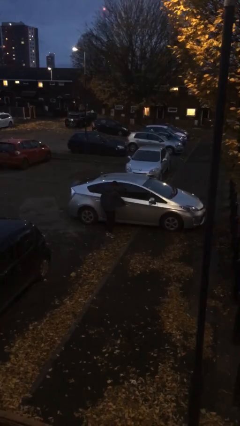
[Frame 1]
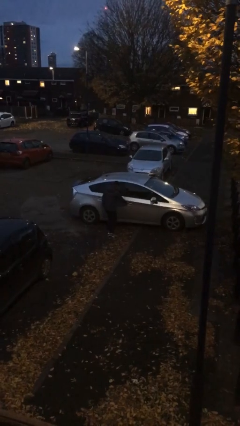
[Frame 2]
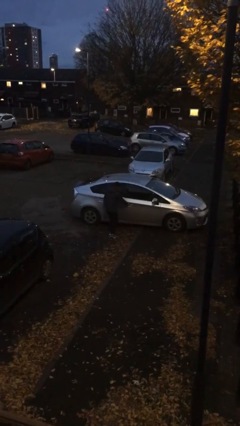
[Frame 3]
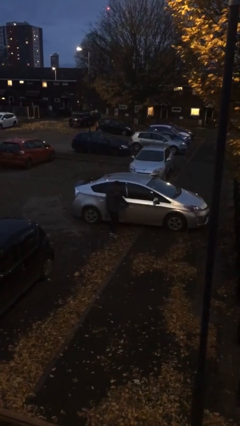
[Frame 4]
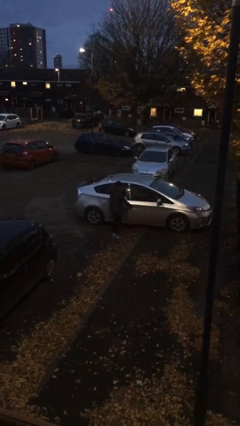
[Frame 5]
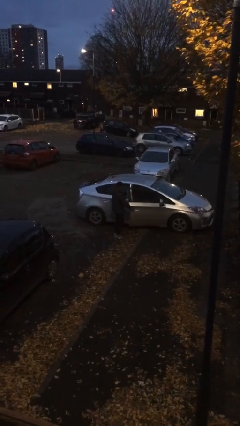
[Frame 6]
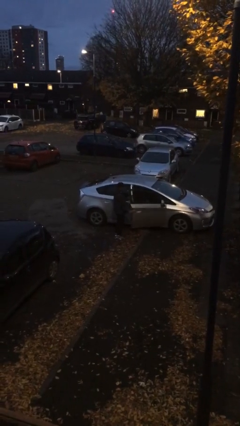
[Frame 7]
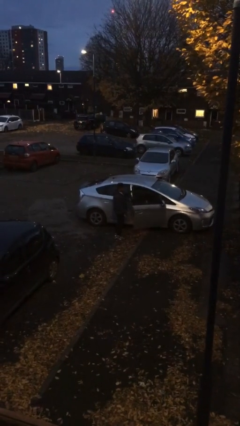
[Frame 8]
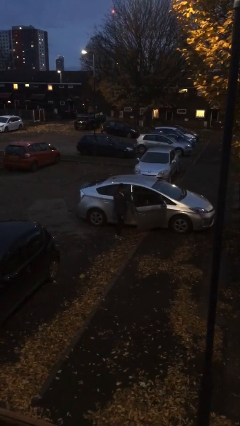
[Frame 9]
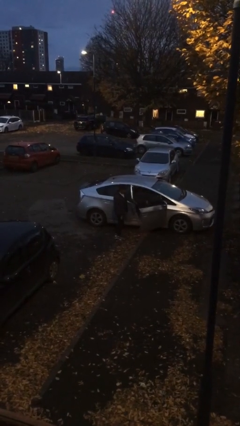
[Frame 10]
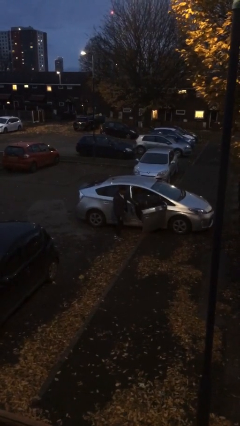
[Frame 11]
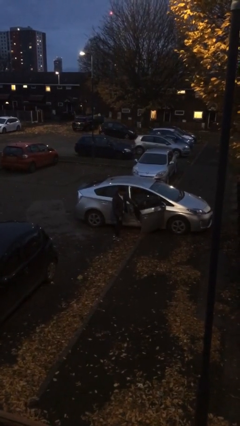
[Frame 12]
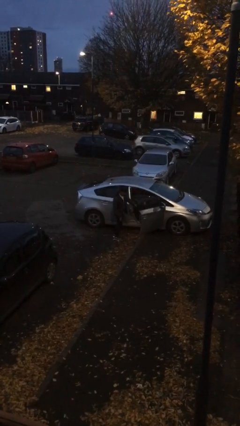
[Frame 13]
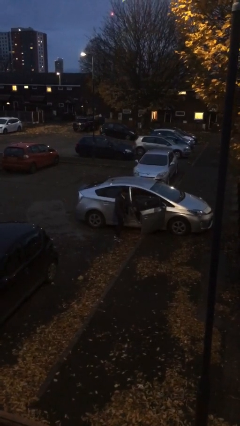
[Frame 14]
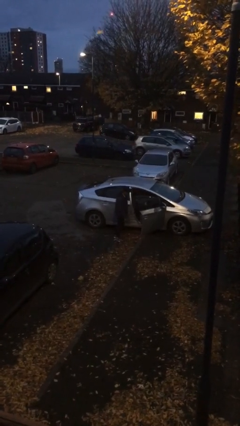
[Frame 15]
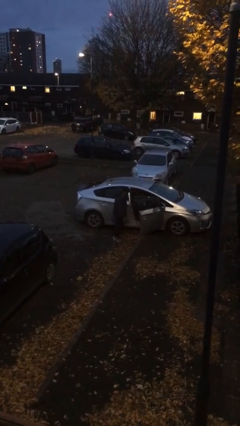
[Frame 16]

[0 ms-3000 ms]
person opens car door

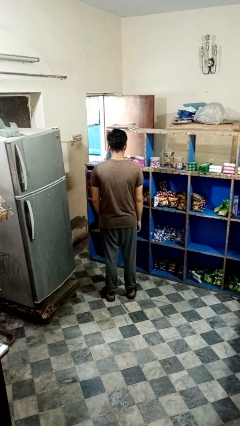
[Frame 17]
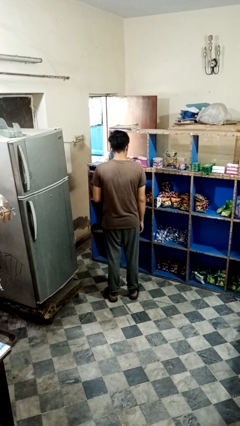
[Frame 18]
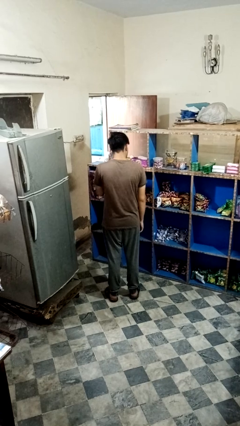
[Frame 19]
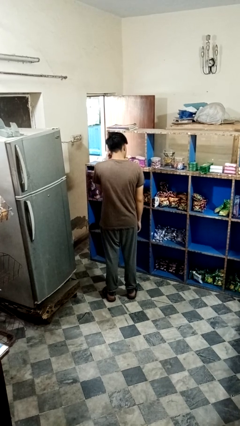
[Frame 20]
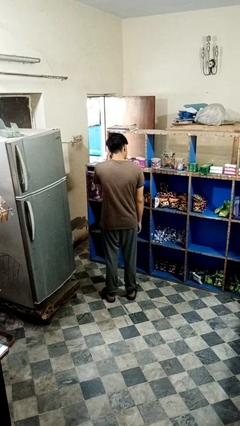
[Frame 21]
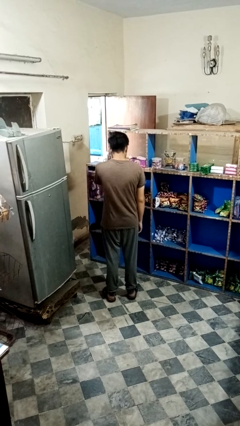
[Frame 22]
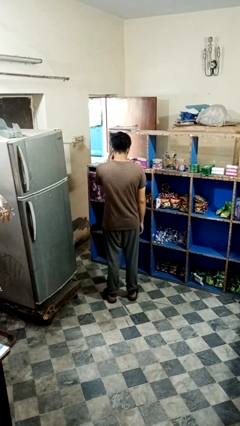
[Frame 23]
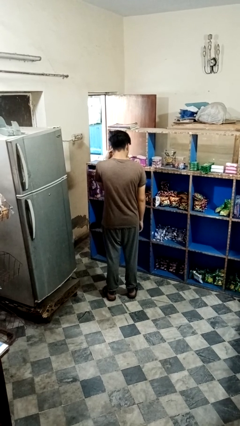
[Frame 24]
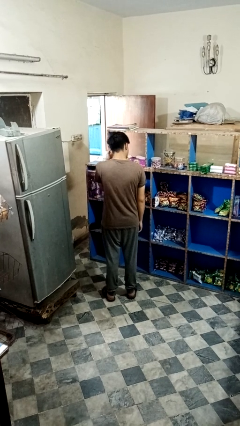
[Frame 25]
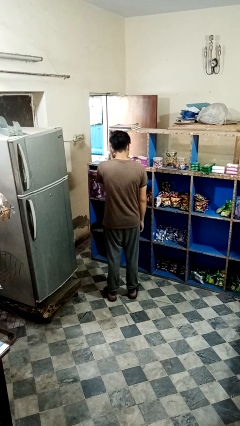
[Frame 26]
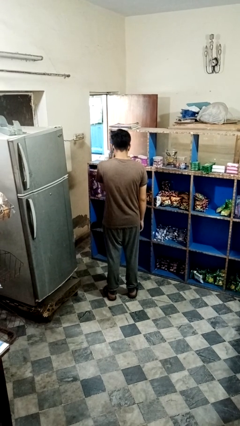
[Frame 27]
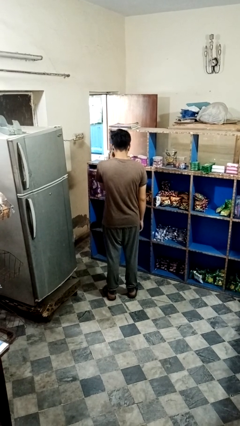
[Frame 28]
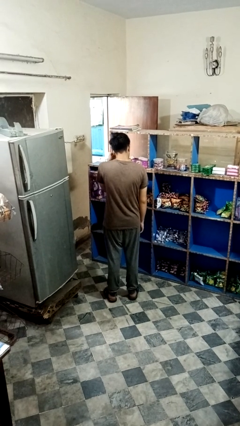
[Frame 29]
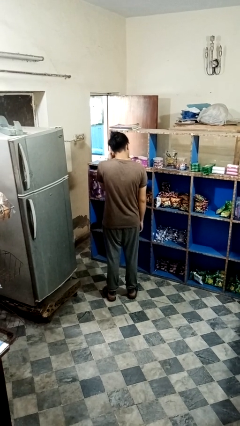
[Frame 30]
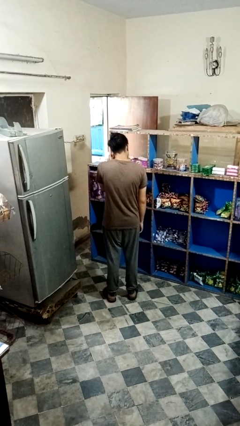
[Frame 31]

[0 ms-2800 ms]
person rubs eyes

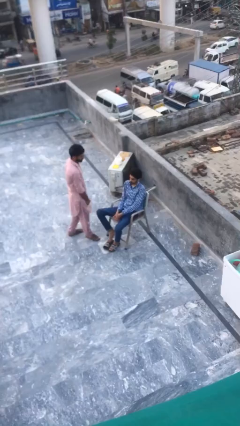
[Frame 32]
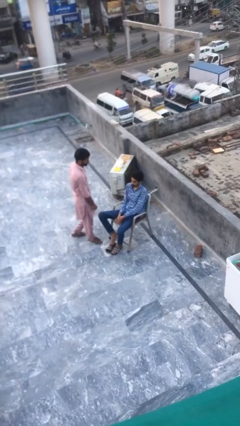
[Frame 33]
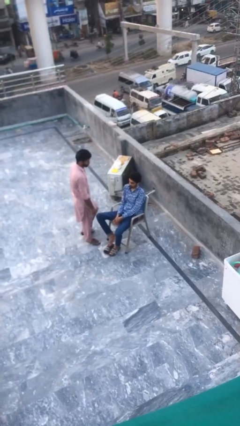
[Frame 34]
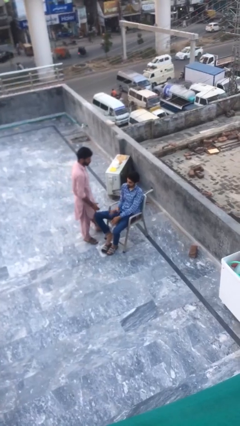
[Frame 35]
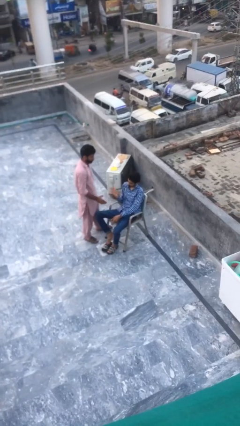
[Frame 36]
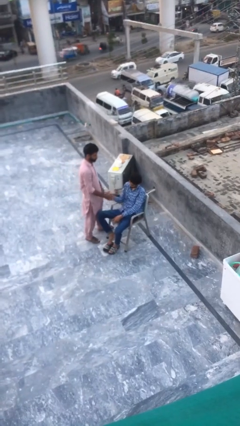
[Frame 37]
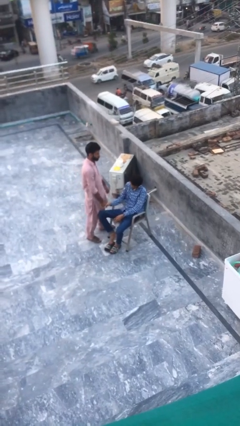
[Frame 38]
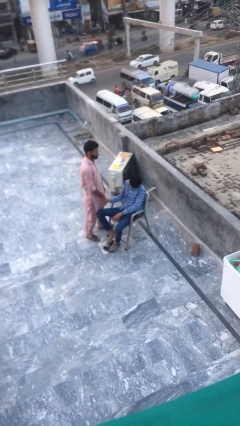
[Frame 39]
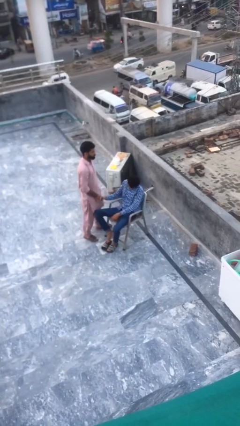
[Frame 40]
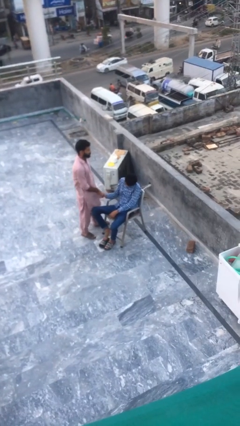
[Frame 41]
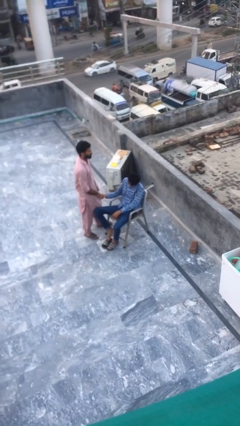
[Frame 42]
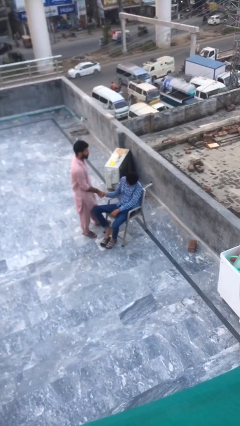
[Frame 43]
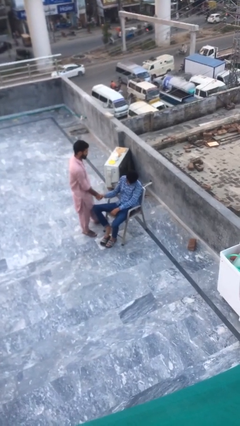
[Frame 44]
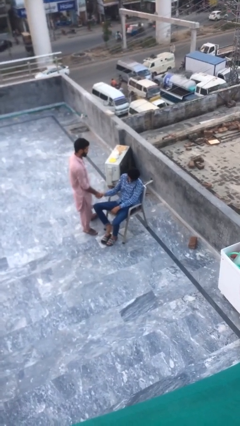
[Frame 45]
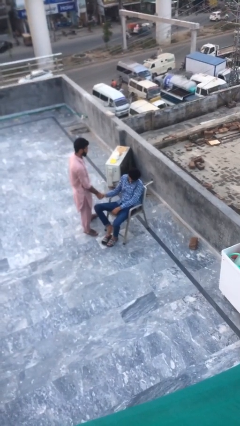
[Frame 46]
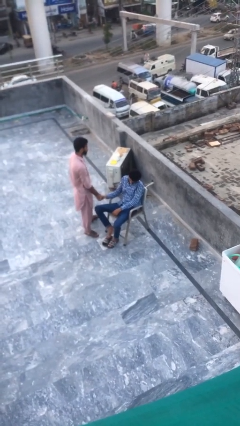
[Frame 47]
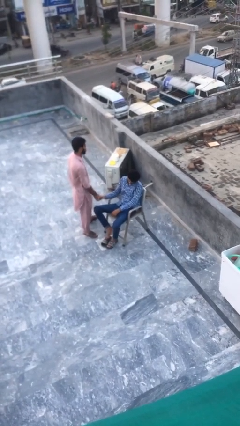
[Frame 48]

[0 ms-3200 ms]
person shakes hand

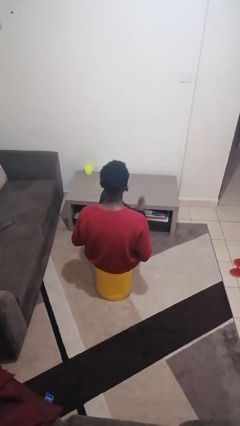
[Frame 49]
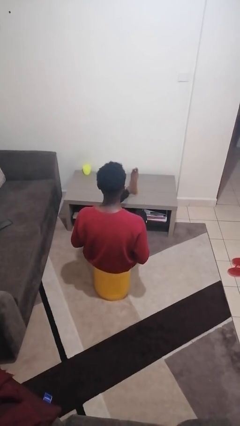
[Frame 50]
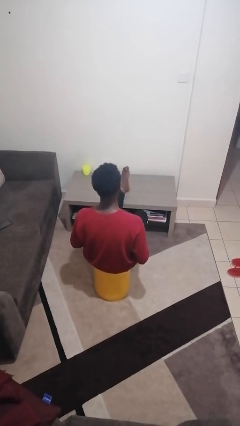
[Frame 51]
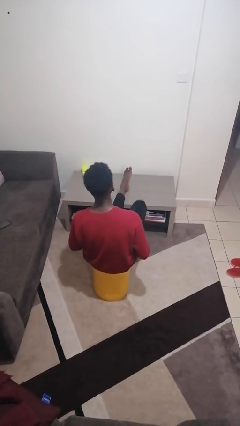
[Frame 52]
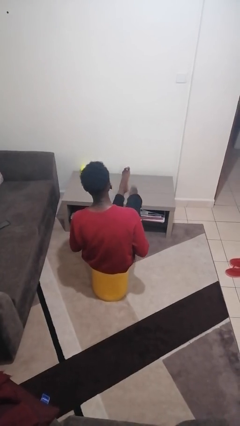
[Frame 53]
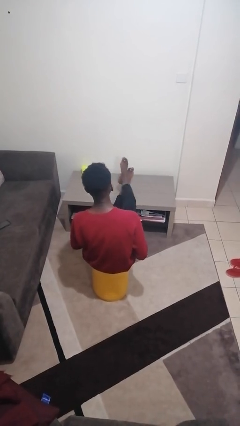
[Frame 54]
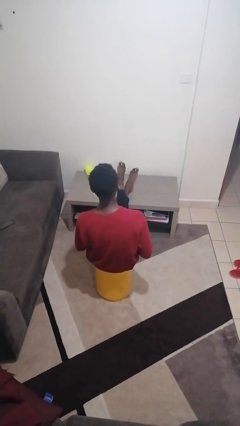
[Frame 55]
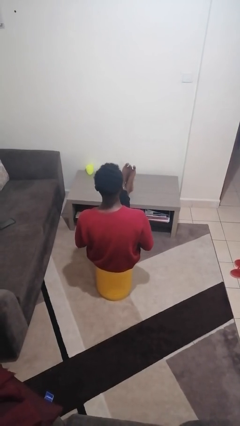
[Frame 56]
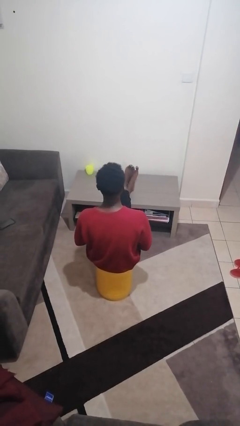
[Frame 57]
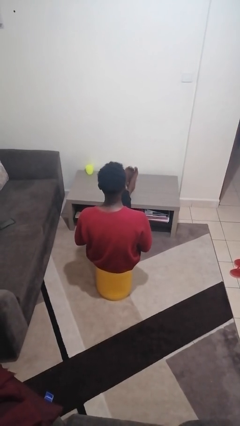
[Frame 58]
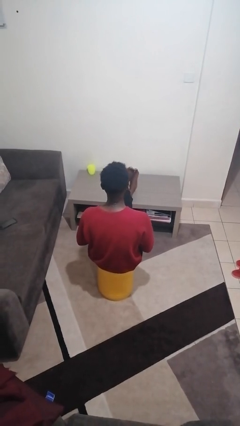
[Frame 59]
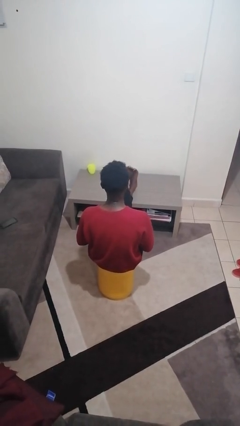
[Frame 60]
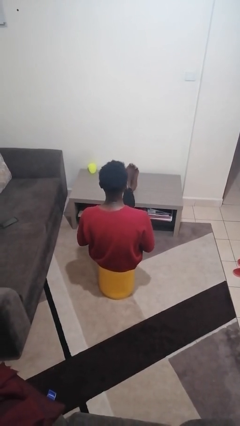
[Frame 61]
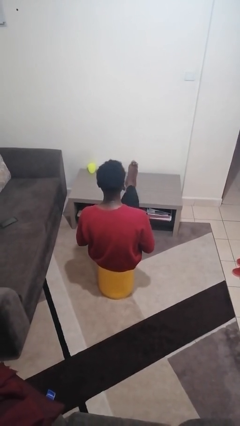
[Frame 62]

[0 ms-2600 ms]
person puts feet up

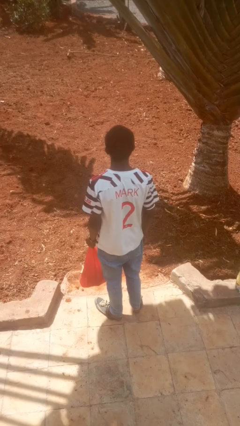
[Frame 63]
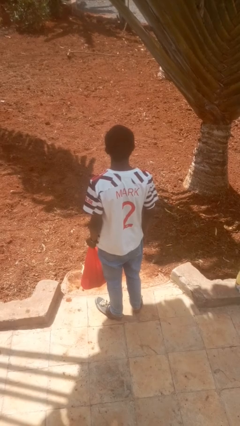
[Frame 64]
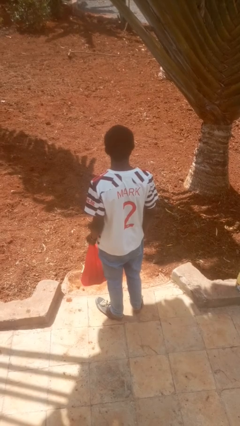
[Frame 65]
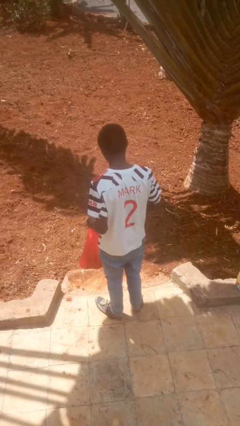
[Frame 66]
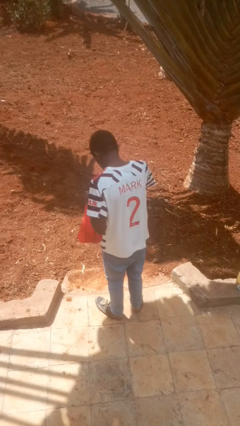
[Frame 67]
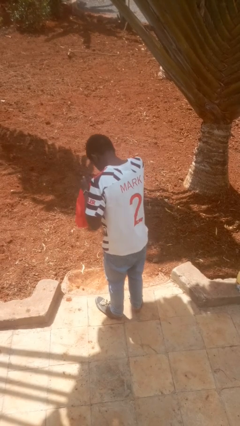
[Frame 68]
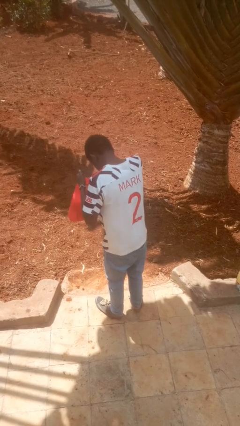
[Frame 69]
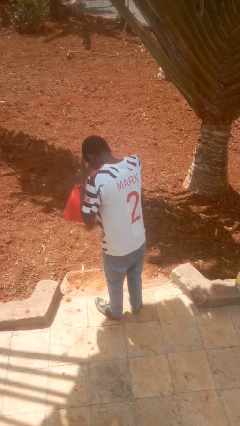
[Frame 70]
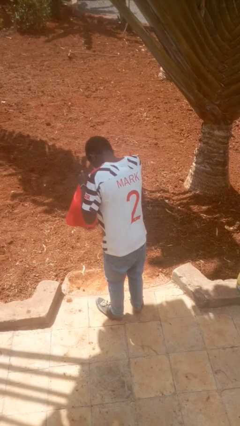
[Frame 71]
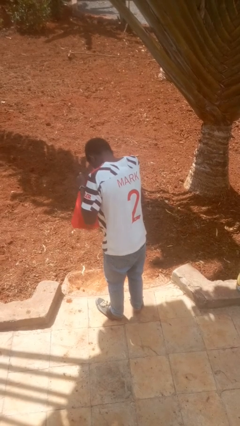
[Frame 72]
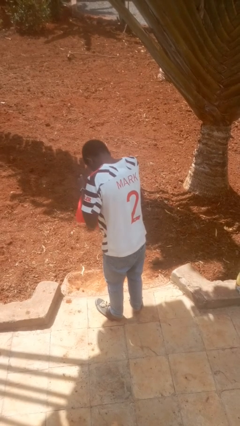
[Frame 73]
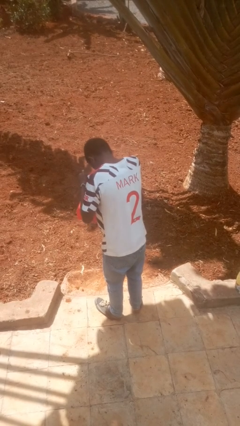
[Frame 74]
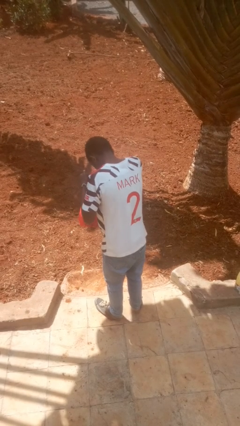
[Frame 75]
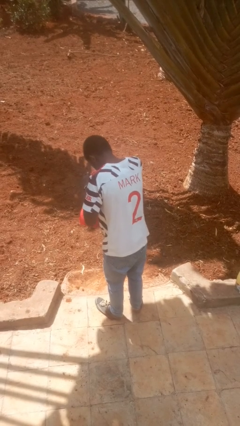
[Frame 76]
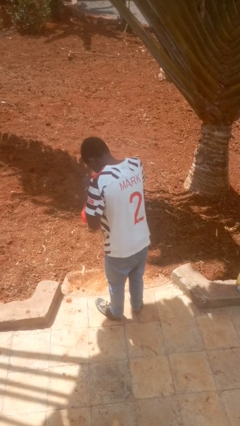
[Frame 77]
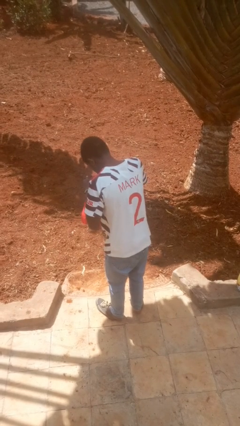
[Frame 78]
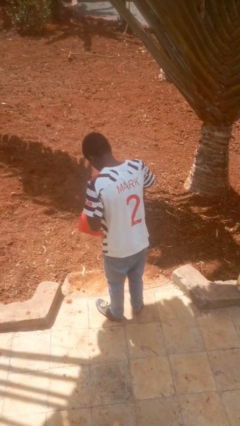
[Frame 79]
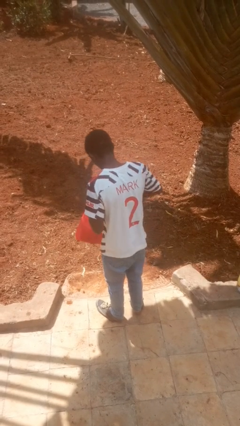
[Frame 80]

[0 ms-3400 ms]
person searches in bag

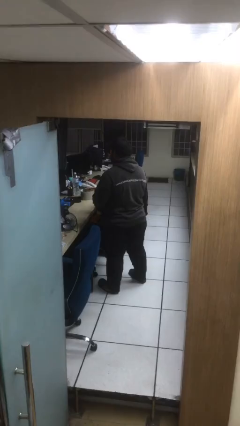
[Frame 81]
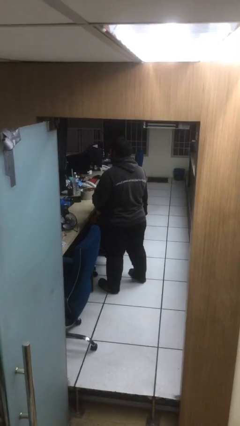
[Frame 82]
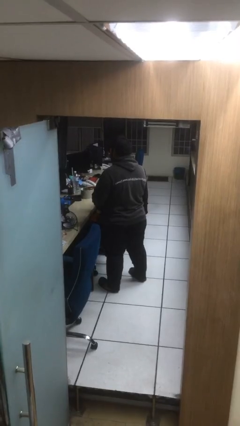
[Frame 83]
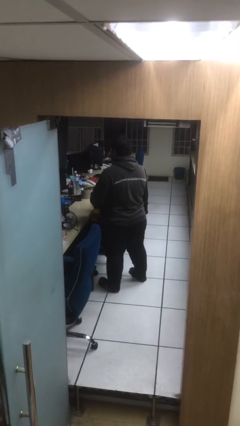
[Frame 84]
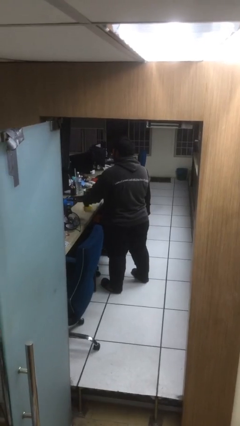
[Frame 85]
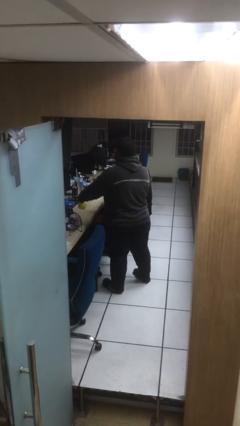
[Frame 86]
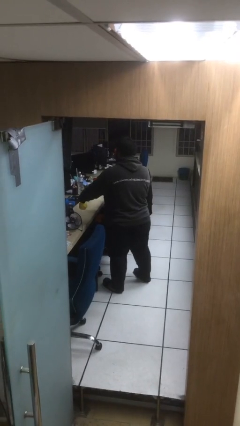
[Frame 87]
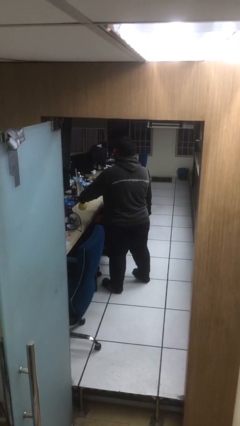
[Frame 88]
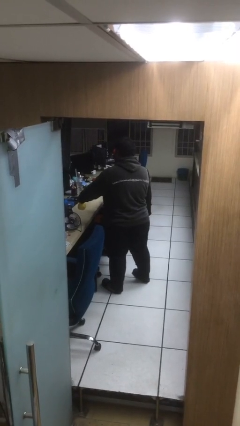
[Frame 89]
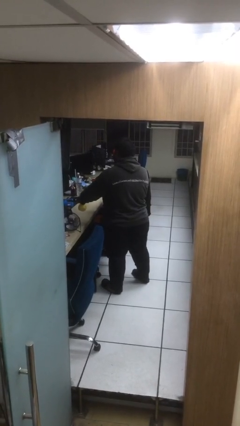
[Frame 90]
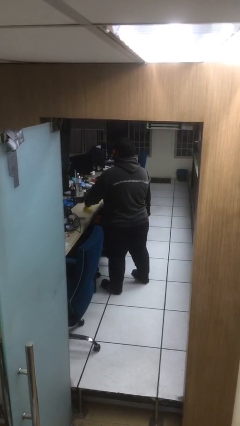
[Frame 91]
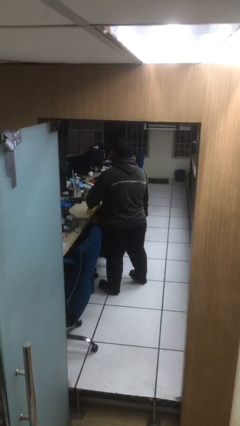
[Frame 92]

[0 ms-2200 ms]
person sprays from bottle
